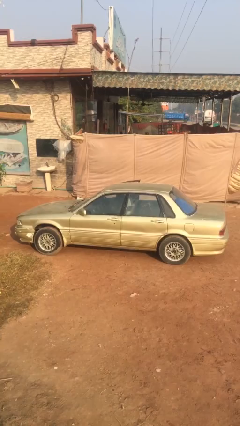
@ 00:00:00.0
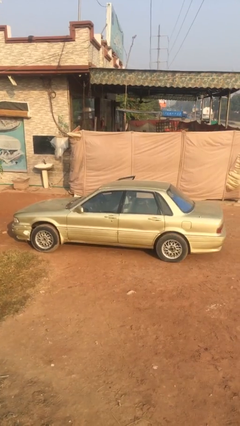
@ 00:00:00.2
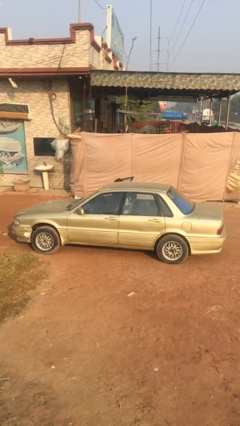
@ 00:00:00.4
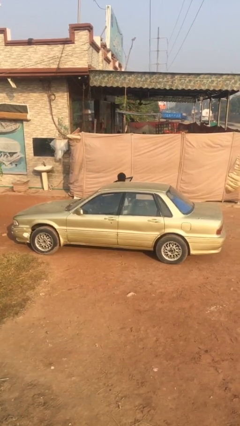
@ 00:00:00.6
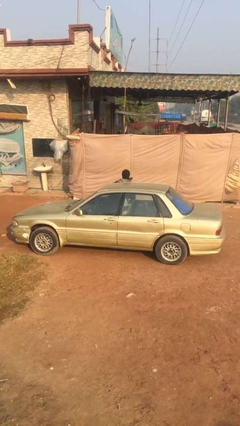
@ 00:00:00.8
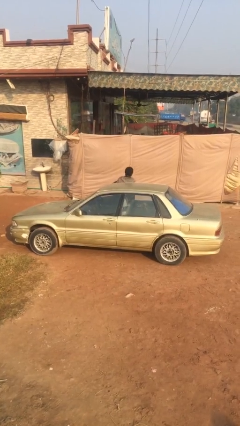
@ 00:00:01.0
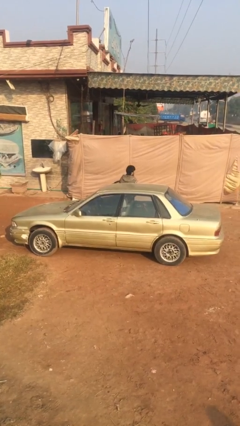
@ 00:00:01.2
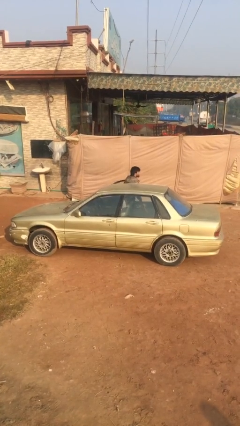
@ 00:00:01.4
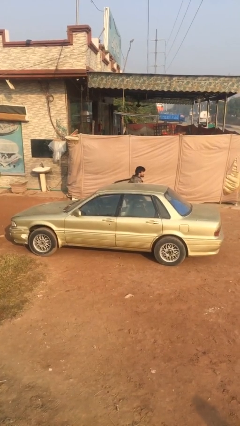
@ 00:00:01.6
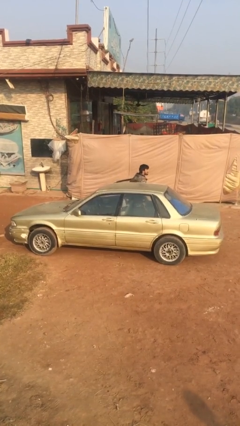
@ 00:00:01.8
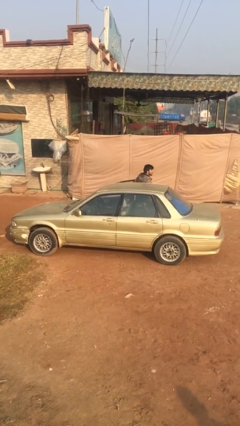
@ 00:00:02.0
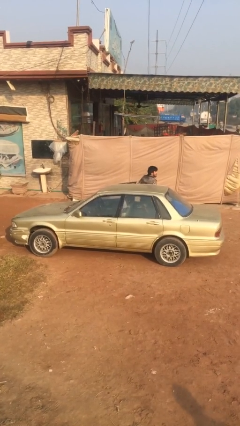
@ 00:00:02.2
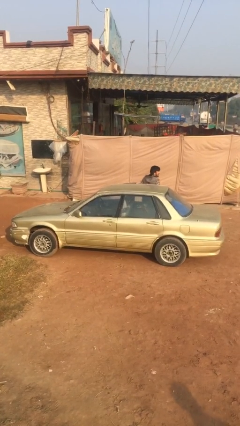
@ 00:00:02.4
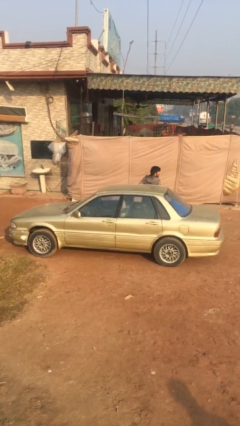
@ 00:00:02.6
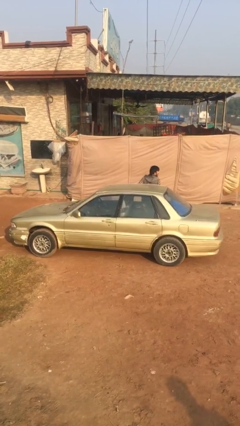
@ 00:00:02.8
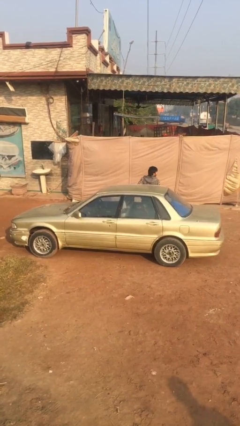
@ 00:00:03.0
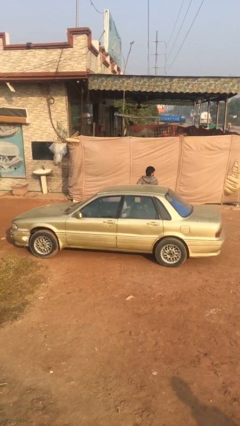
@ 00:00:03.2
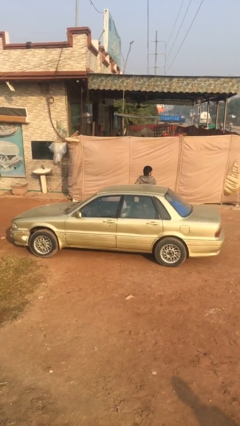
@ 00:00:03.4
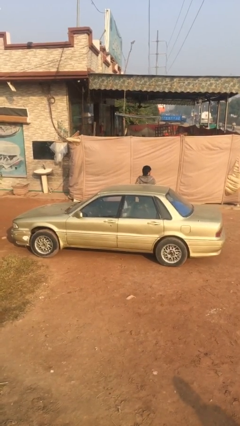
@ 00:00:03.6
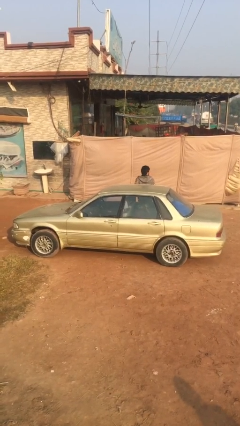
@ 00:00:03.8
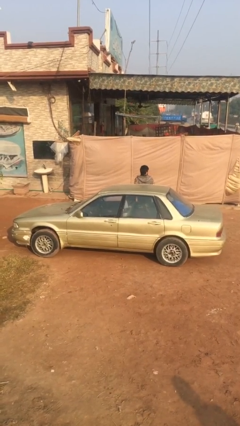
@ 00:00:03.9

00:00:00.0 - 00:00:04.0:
car drops off person

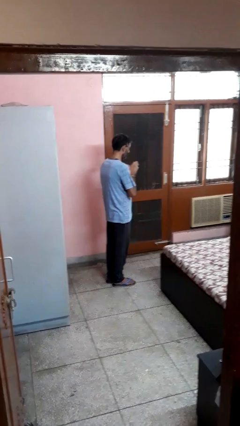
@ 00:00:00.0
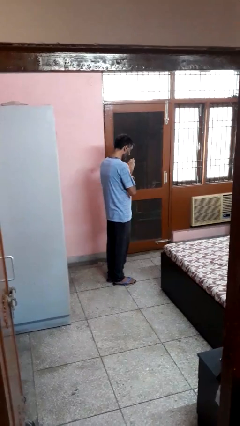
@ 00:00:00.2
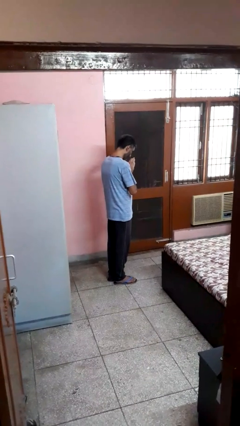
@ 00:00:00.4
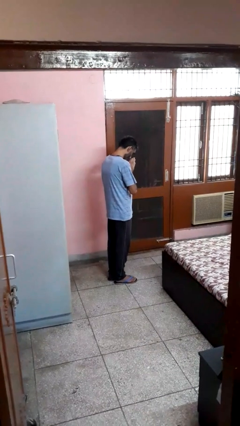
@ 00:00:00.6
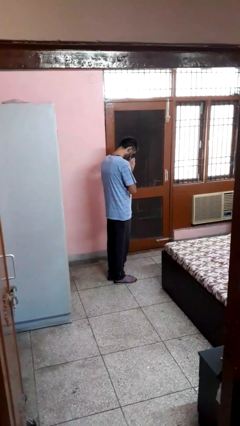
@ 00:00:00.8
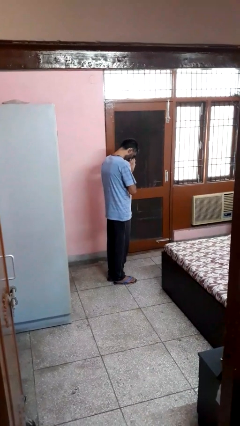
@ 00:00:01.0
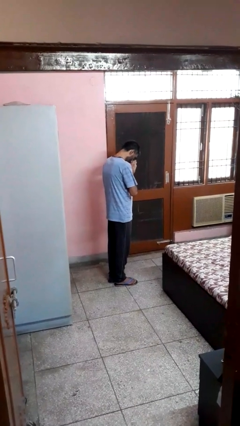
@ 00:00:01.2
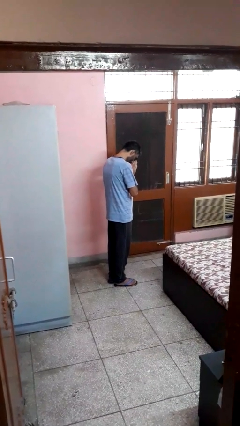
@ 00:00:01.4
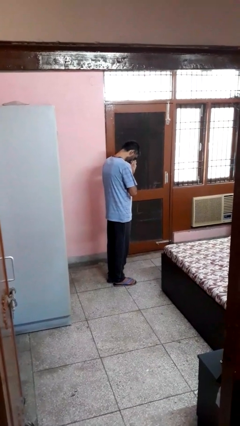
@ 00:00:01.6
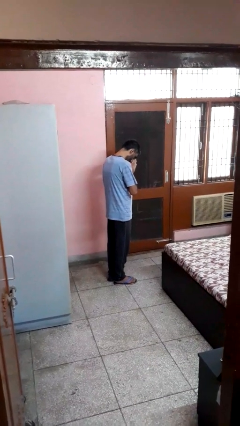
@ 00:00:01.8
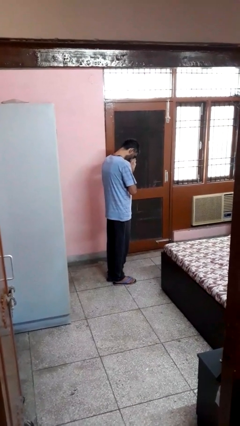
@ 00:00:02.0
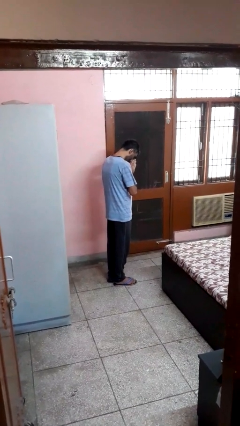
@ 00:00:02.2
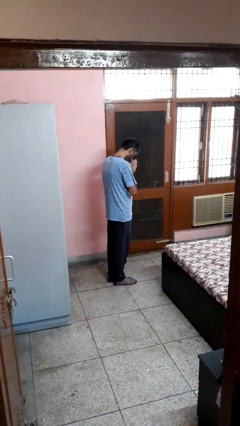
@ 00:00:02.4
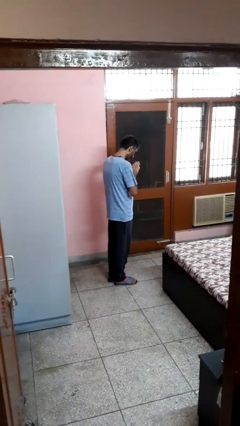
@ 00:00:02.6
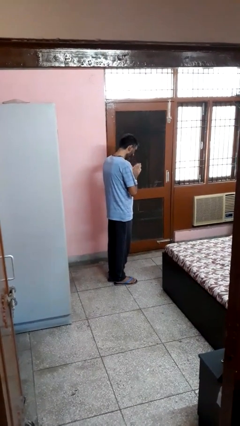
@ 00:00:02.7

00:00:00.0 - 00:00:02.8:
person prays

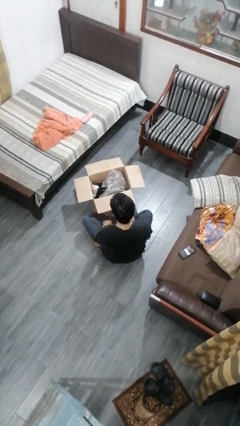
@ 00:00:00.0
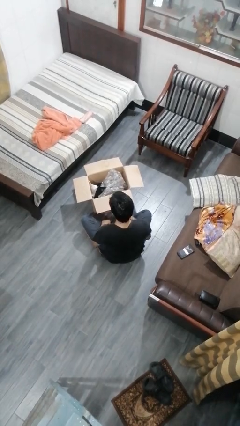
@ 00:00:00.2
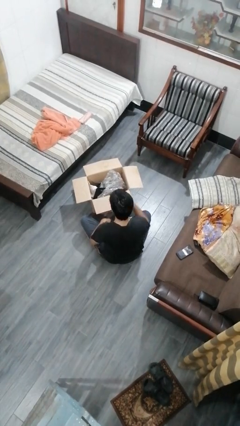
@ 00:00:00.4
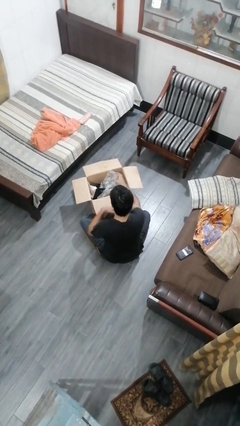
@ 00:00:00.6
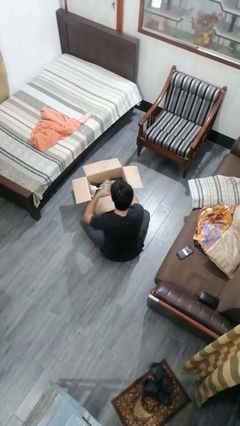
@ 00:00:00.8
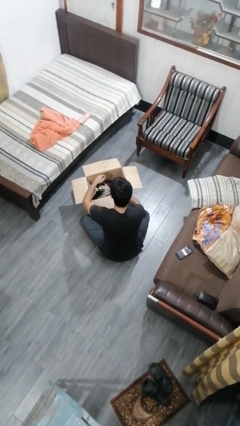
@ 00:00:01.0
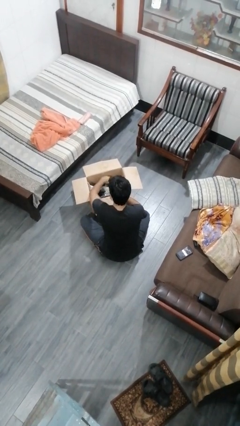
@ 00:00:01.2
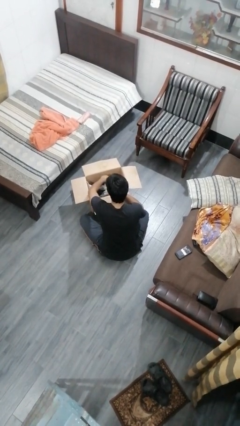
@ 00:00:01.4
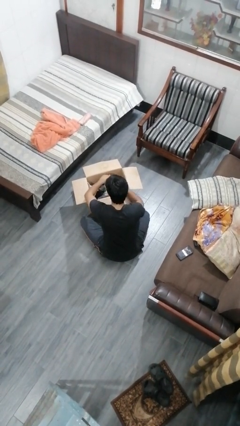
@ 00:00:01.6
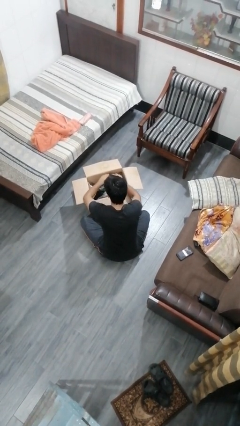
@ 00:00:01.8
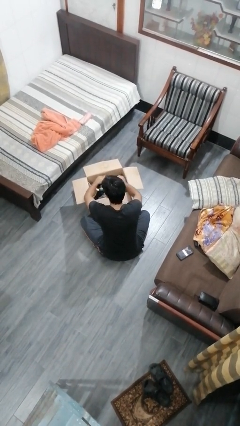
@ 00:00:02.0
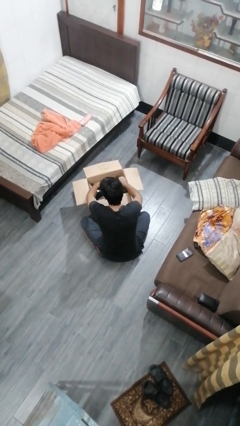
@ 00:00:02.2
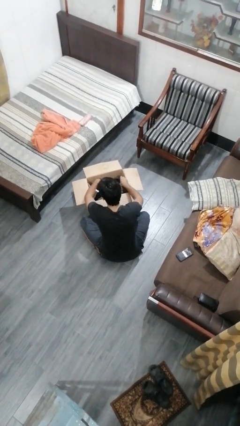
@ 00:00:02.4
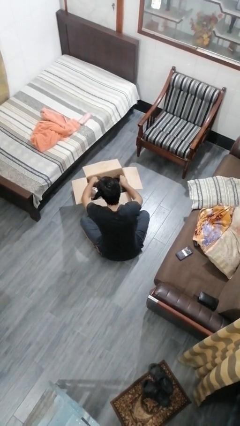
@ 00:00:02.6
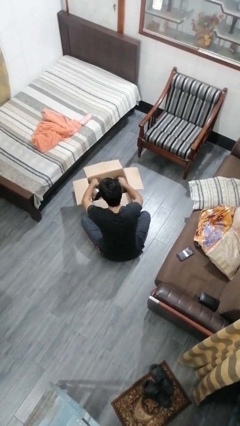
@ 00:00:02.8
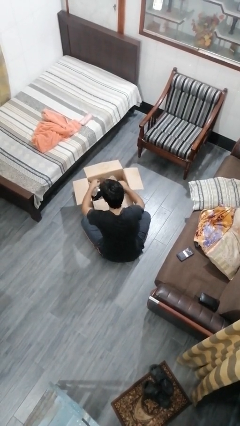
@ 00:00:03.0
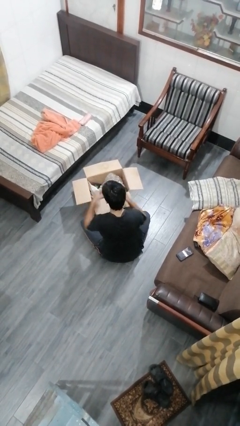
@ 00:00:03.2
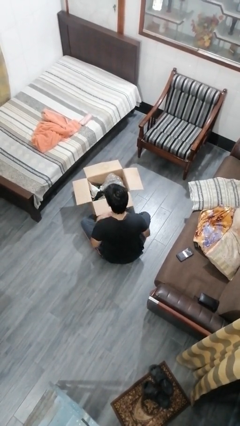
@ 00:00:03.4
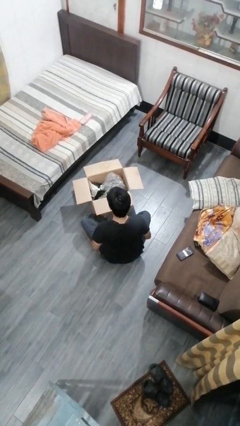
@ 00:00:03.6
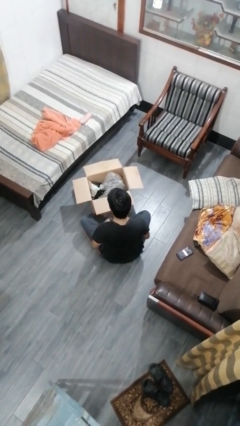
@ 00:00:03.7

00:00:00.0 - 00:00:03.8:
person searches in box

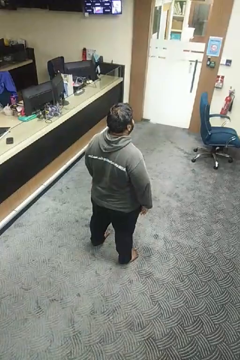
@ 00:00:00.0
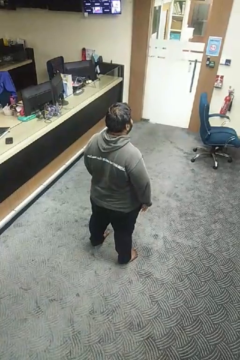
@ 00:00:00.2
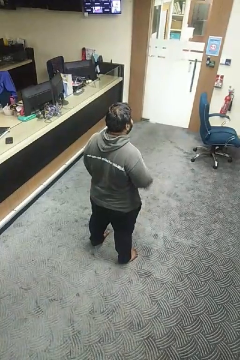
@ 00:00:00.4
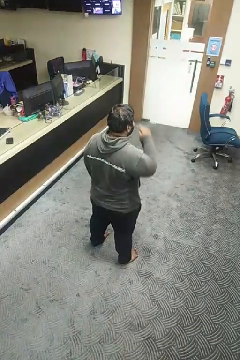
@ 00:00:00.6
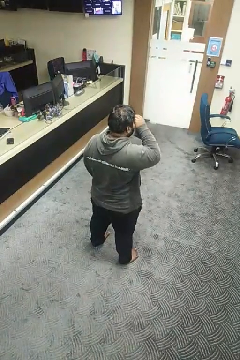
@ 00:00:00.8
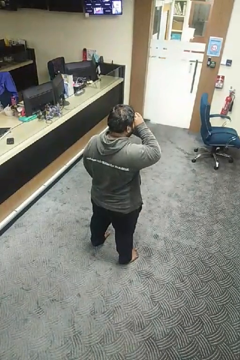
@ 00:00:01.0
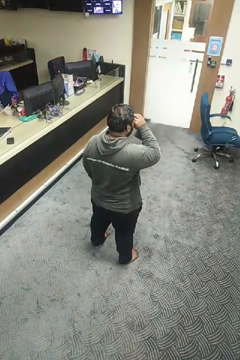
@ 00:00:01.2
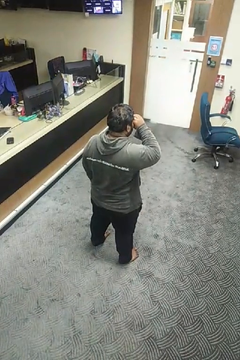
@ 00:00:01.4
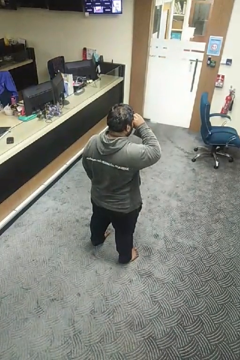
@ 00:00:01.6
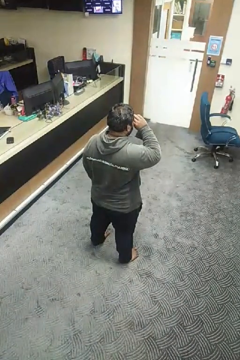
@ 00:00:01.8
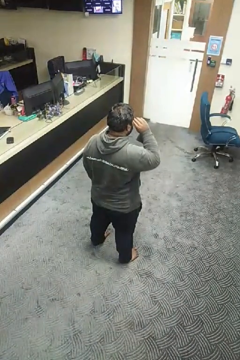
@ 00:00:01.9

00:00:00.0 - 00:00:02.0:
person rubs eyes

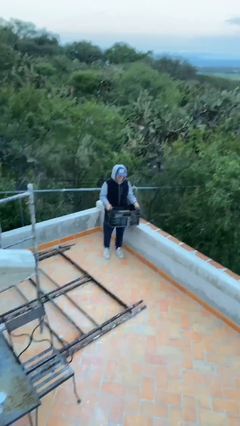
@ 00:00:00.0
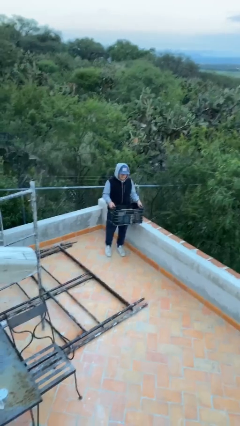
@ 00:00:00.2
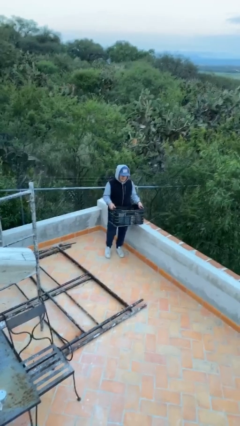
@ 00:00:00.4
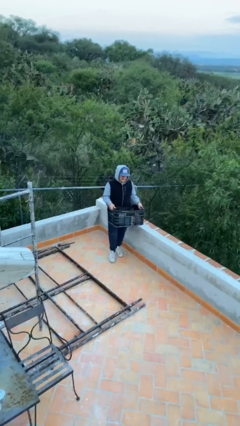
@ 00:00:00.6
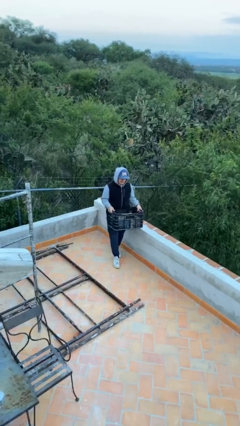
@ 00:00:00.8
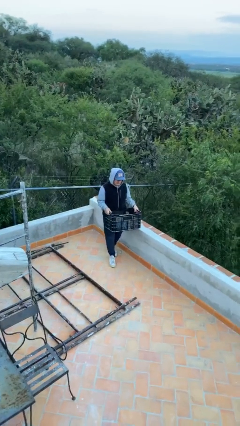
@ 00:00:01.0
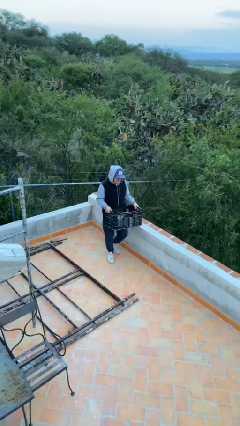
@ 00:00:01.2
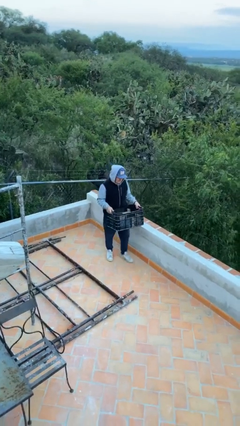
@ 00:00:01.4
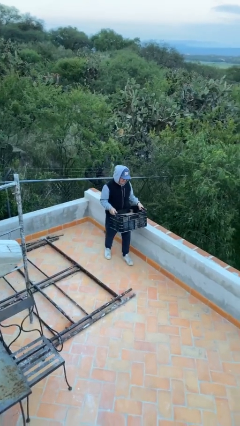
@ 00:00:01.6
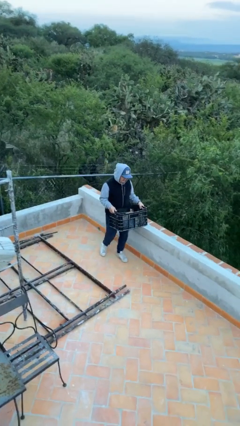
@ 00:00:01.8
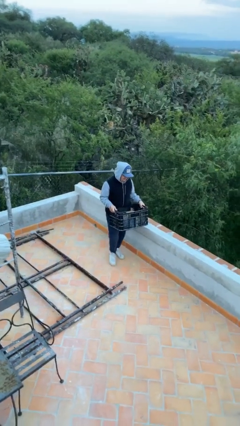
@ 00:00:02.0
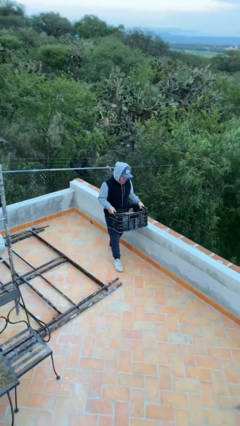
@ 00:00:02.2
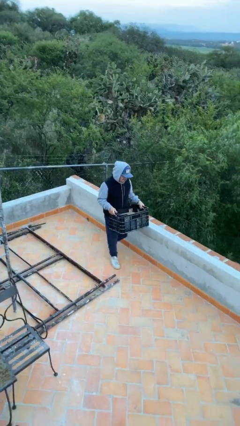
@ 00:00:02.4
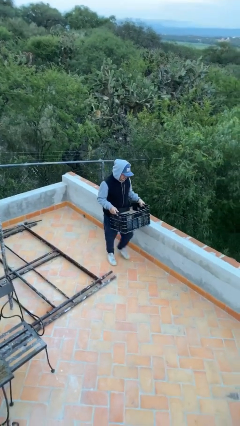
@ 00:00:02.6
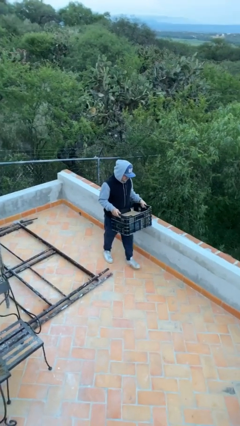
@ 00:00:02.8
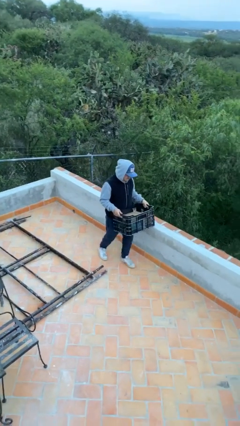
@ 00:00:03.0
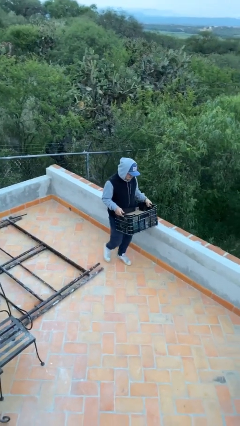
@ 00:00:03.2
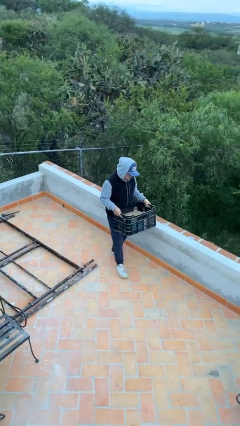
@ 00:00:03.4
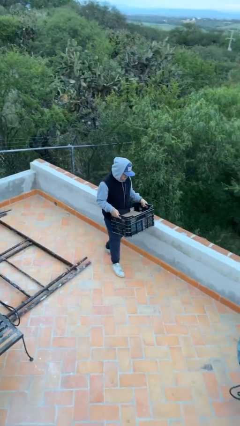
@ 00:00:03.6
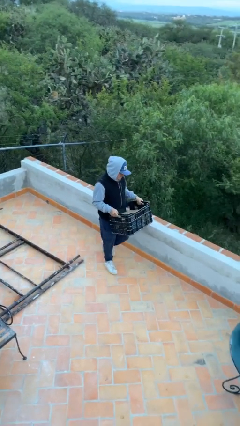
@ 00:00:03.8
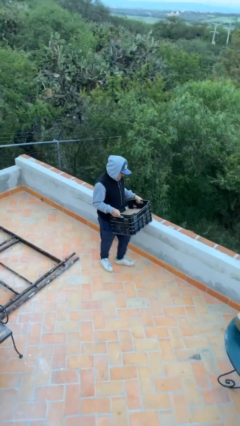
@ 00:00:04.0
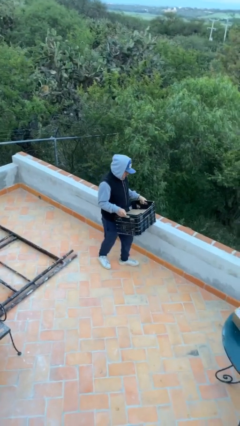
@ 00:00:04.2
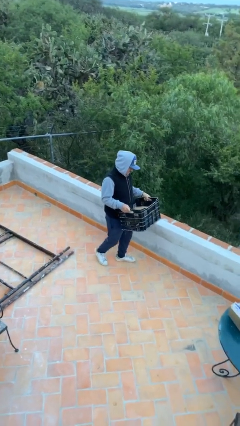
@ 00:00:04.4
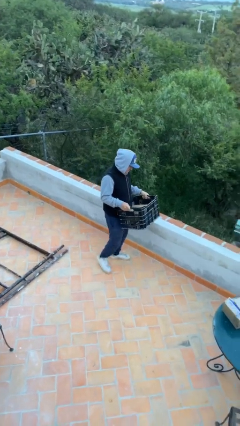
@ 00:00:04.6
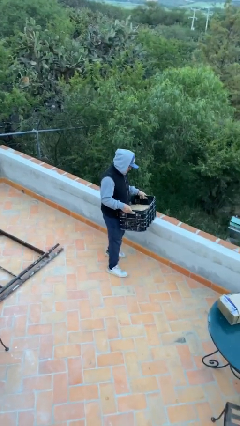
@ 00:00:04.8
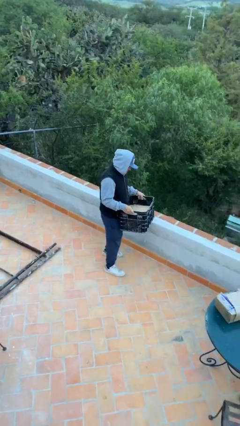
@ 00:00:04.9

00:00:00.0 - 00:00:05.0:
person carries heavy object
